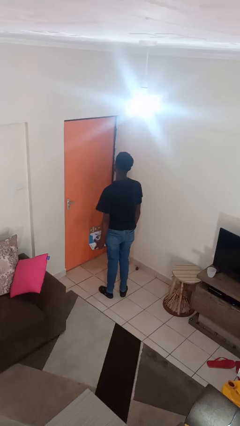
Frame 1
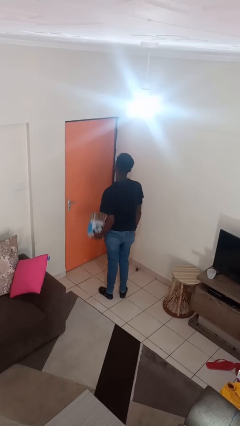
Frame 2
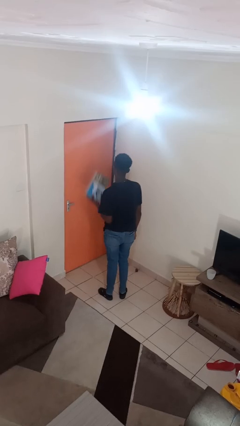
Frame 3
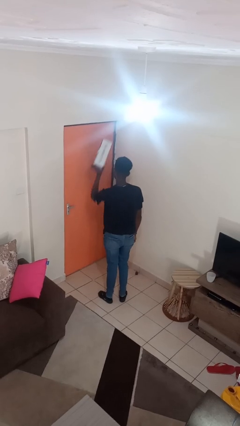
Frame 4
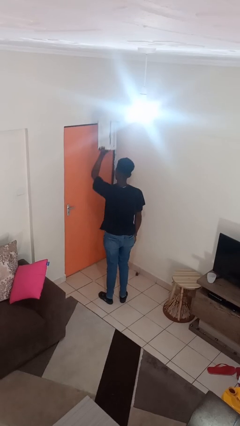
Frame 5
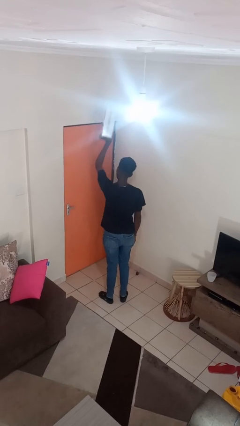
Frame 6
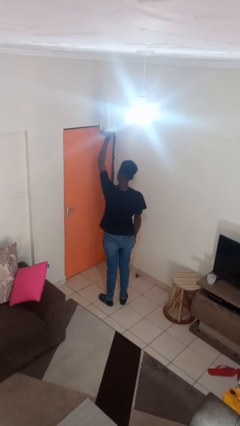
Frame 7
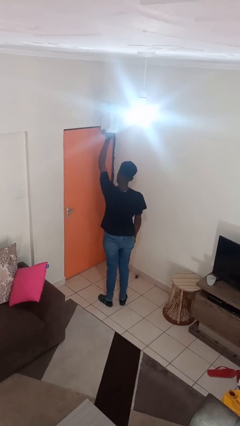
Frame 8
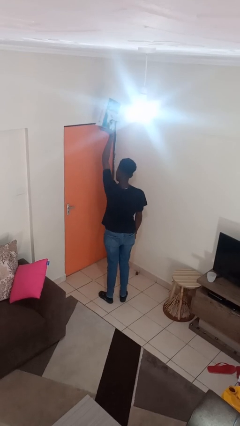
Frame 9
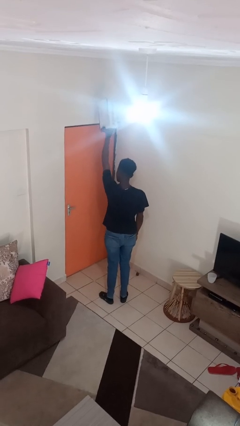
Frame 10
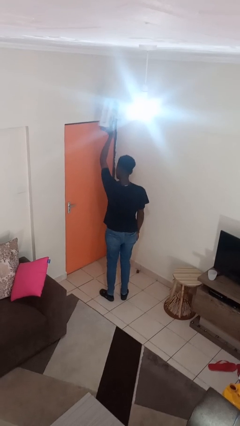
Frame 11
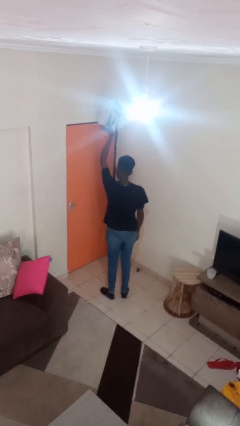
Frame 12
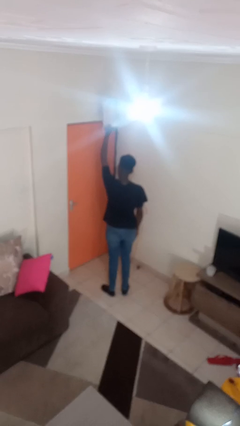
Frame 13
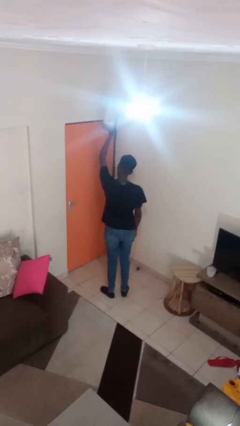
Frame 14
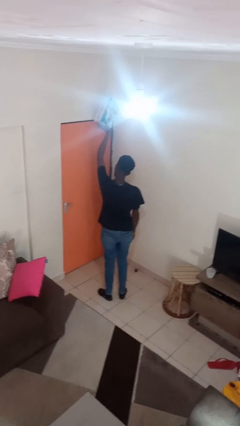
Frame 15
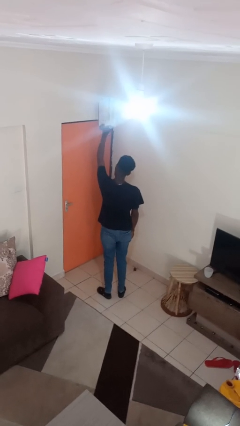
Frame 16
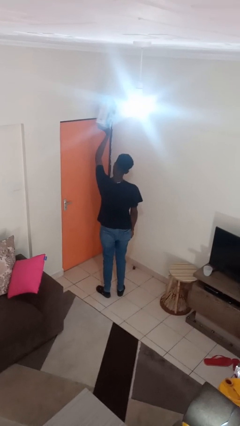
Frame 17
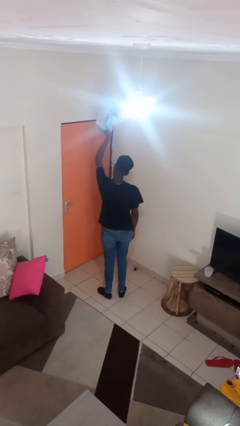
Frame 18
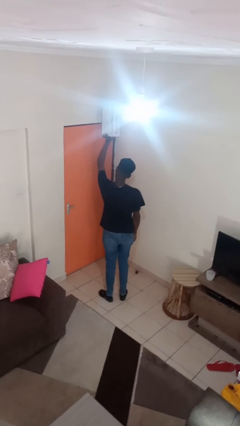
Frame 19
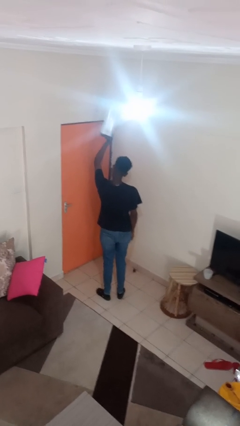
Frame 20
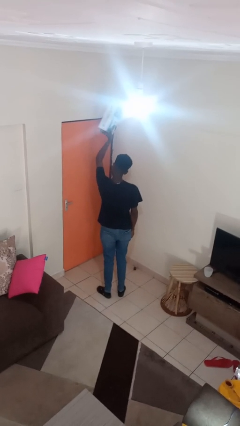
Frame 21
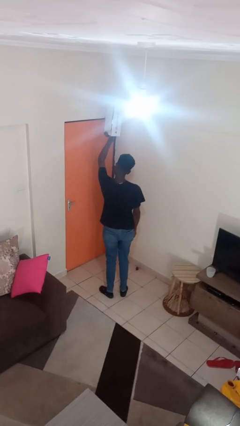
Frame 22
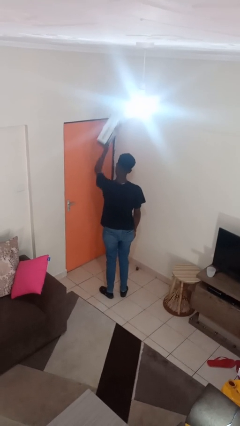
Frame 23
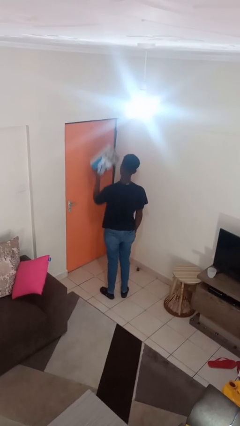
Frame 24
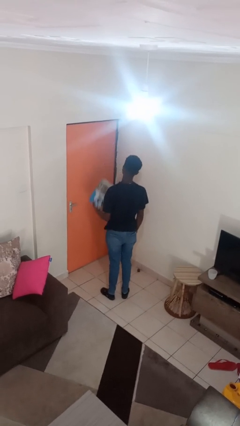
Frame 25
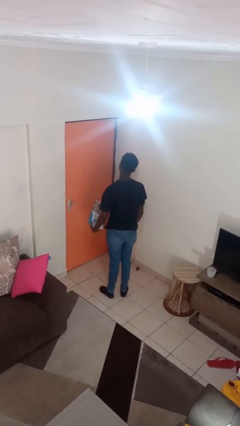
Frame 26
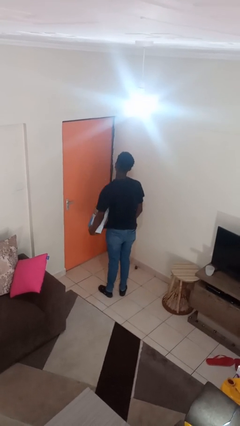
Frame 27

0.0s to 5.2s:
person holds object above head

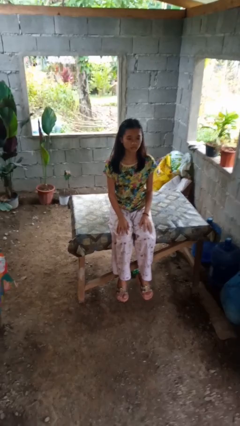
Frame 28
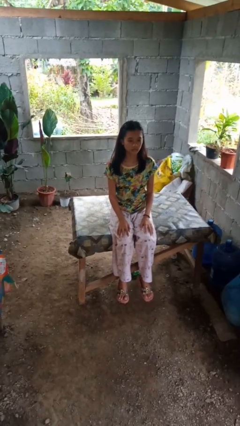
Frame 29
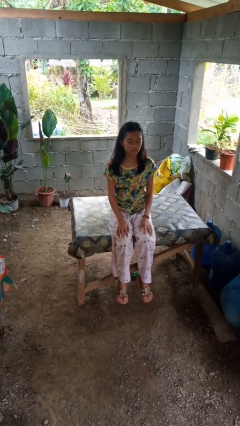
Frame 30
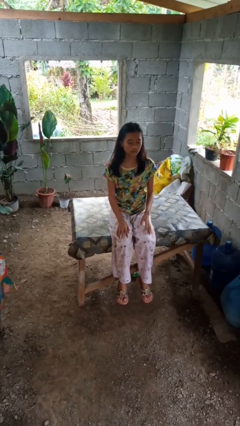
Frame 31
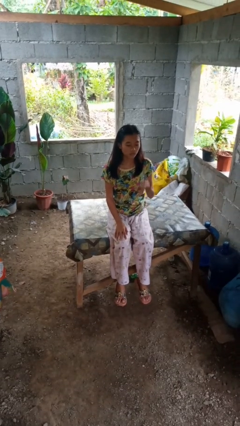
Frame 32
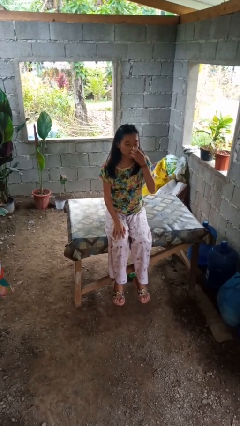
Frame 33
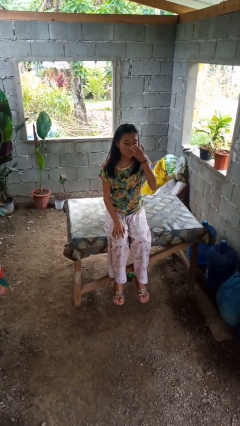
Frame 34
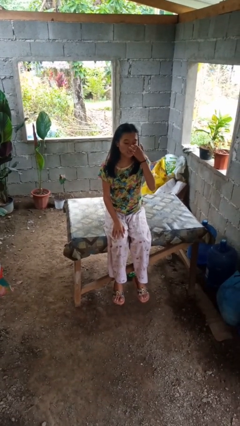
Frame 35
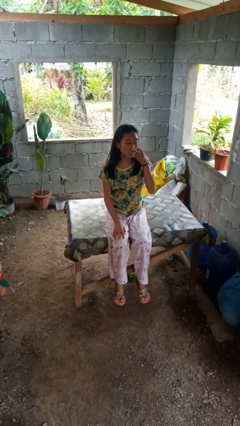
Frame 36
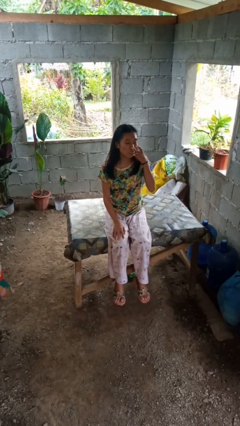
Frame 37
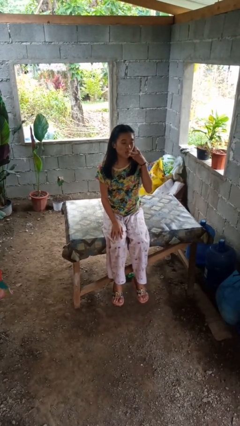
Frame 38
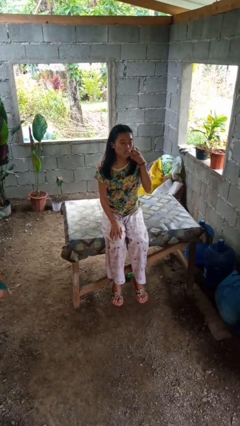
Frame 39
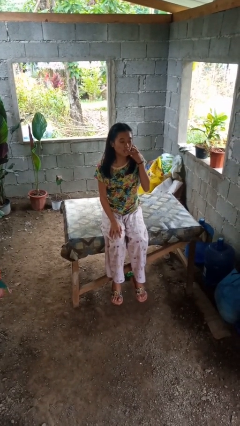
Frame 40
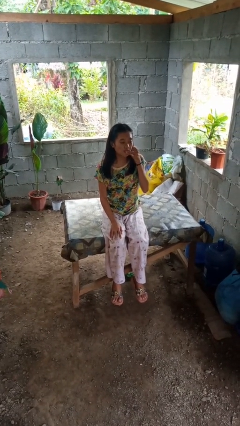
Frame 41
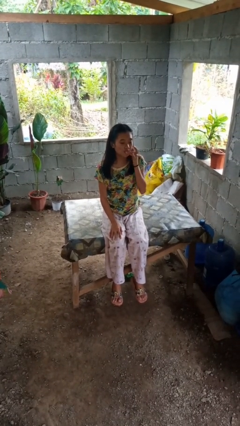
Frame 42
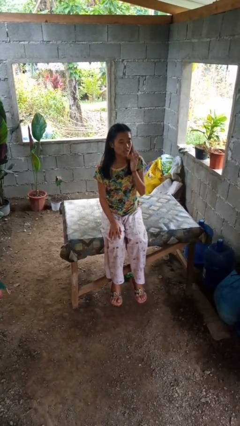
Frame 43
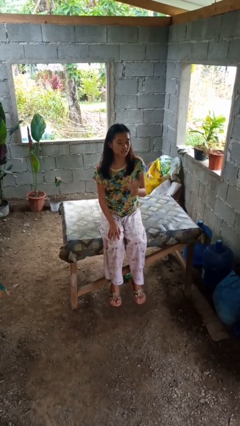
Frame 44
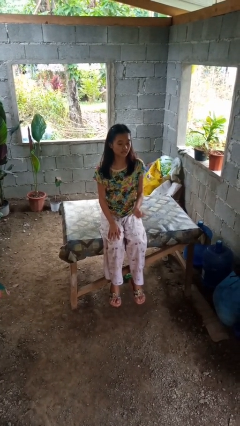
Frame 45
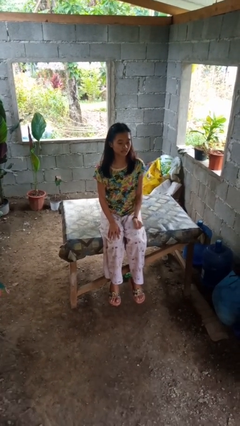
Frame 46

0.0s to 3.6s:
person licks fingers

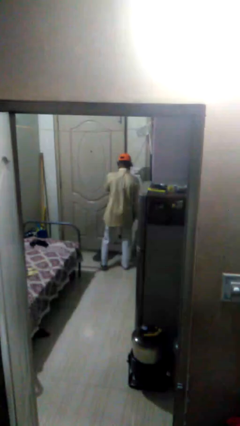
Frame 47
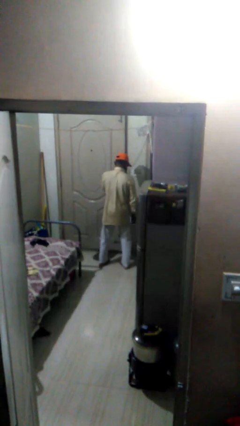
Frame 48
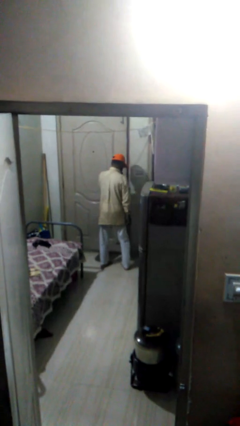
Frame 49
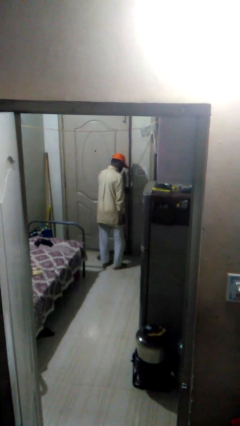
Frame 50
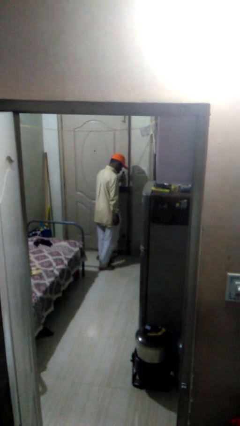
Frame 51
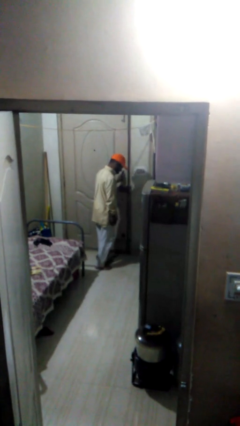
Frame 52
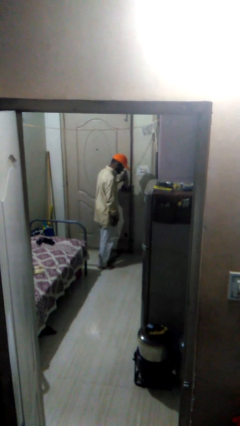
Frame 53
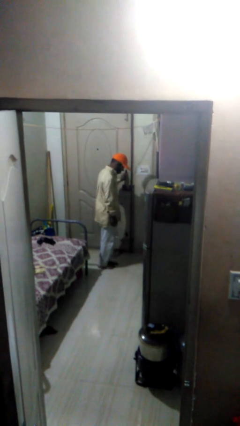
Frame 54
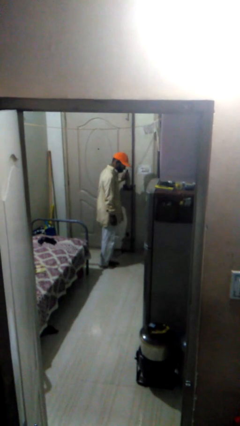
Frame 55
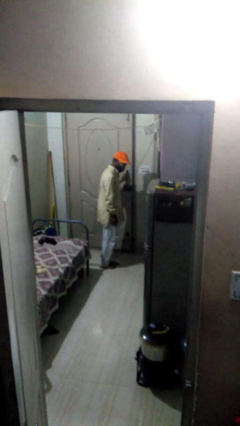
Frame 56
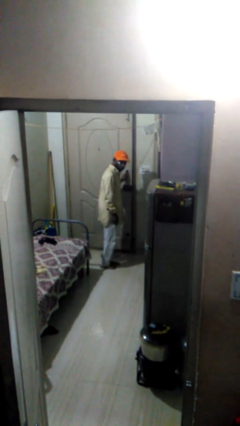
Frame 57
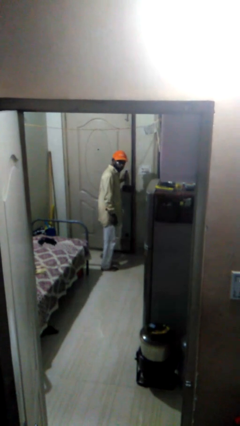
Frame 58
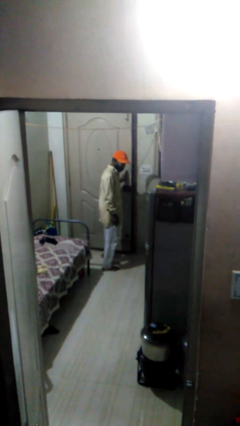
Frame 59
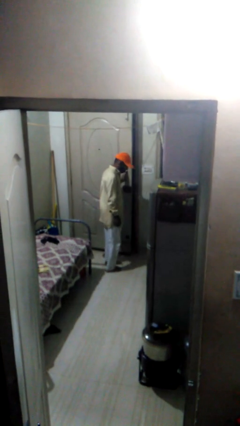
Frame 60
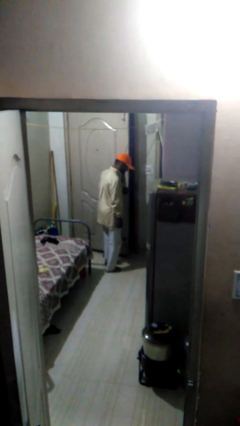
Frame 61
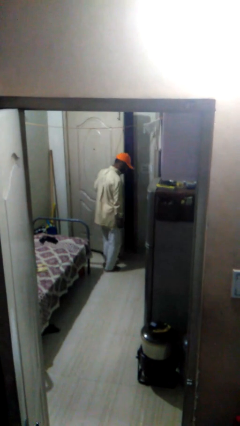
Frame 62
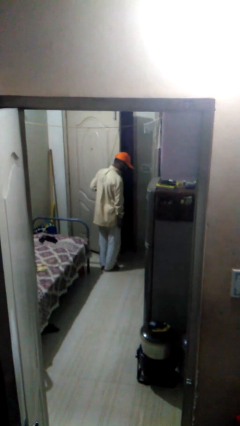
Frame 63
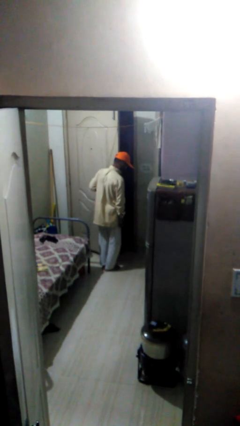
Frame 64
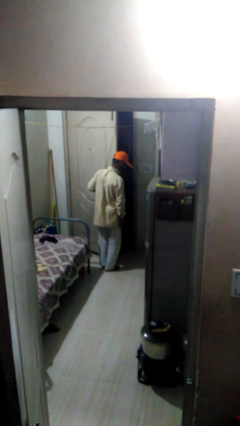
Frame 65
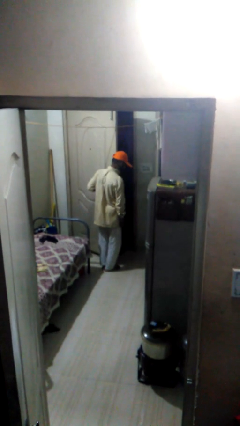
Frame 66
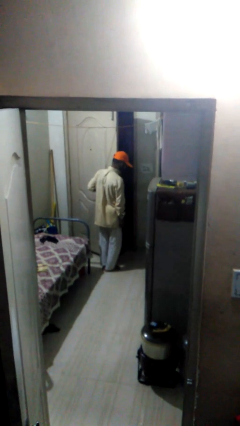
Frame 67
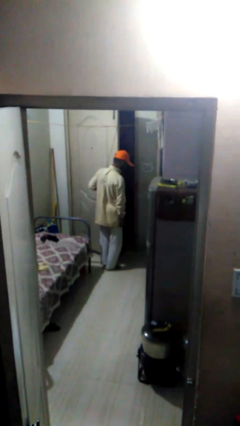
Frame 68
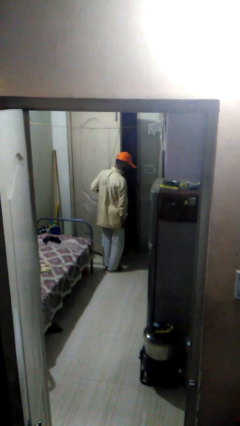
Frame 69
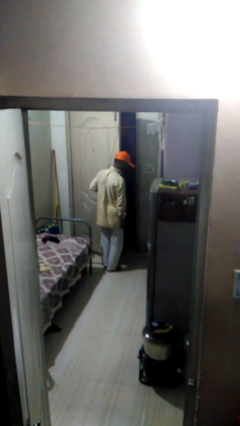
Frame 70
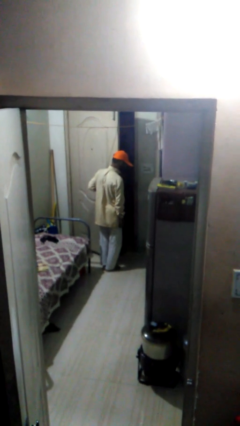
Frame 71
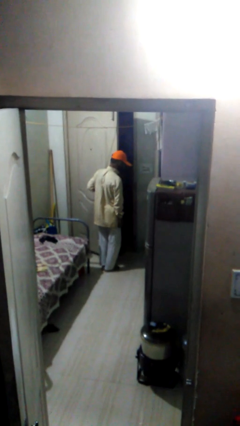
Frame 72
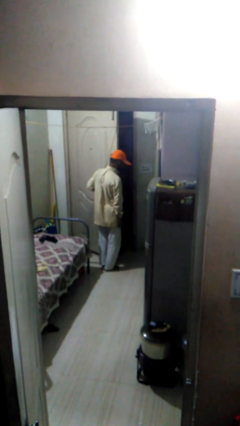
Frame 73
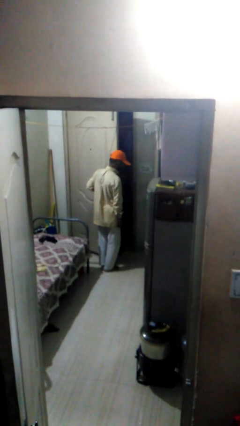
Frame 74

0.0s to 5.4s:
person opens facility door

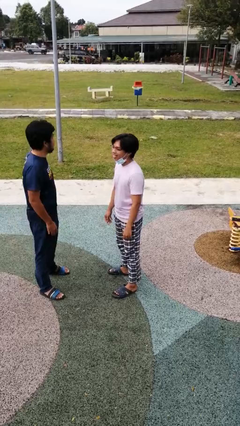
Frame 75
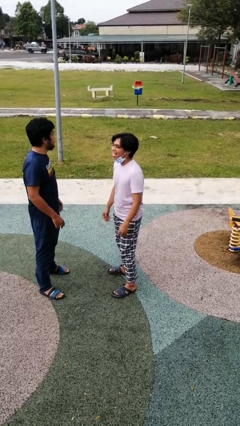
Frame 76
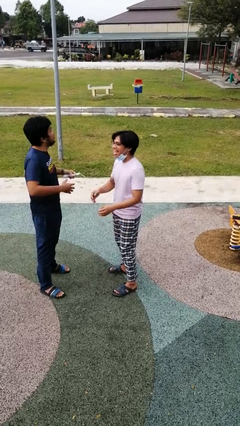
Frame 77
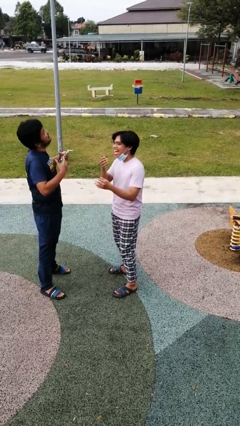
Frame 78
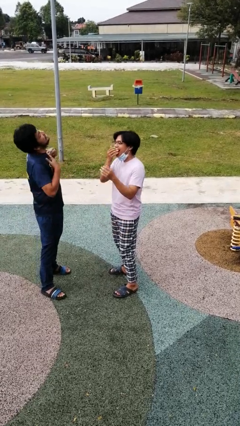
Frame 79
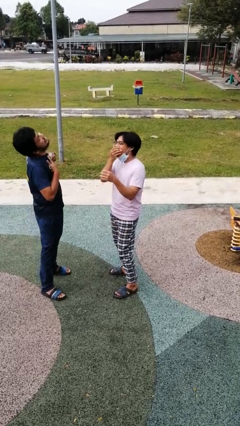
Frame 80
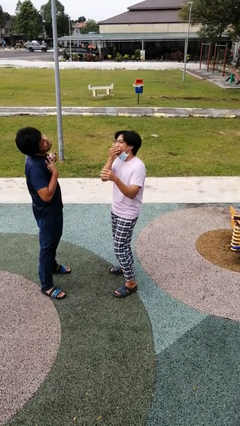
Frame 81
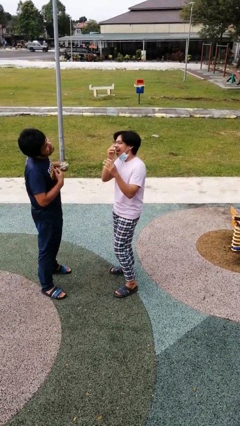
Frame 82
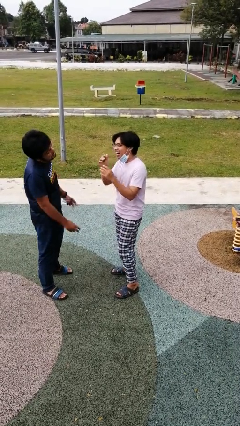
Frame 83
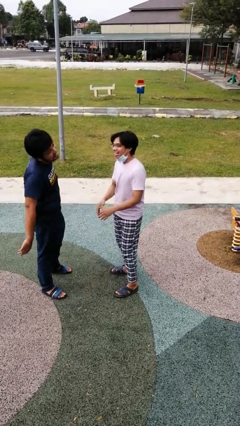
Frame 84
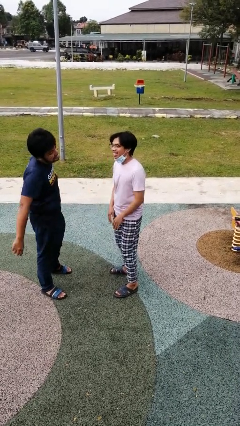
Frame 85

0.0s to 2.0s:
person laughs with person

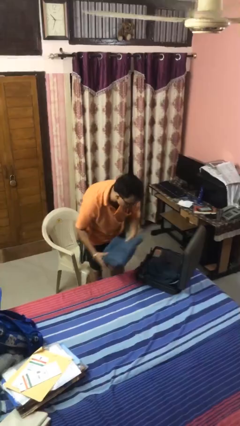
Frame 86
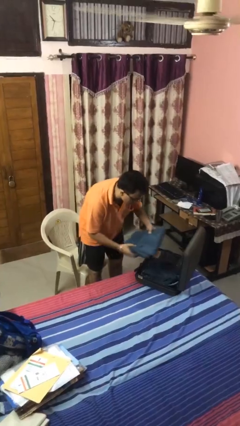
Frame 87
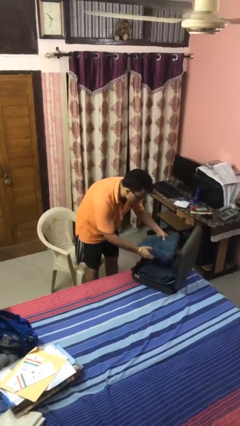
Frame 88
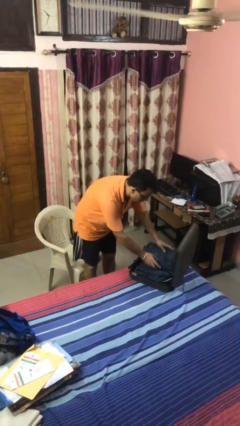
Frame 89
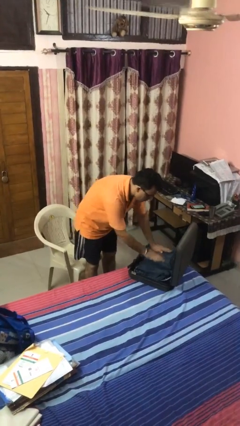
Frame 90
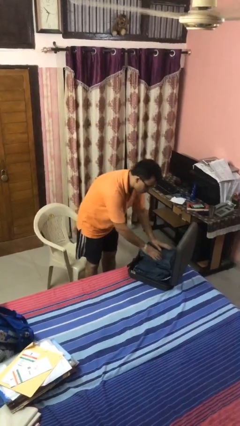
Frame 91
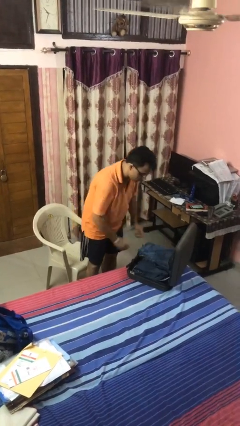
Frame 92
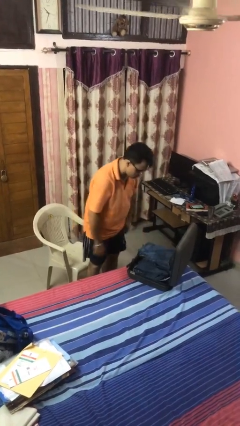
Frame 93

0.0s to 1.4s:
person loads clothes into suitcase
